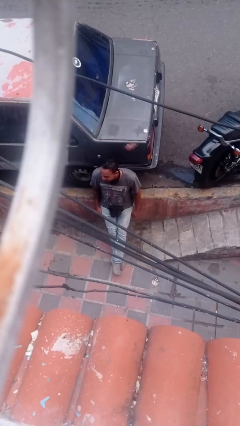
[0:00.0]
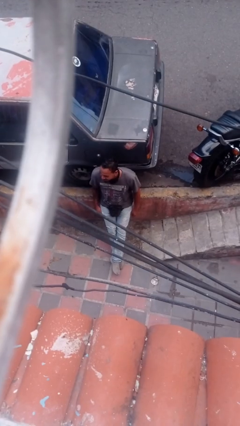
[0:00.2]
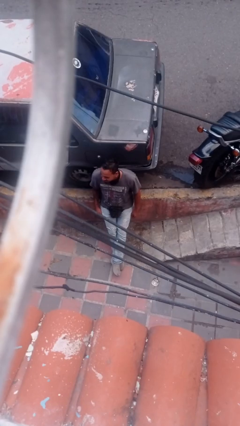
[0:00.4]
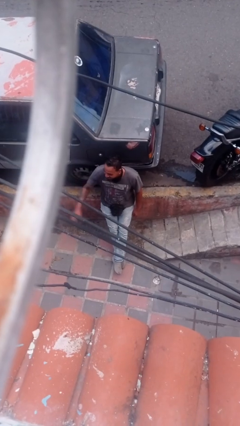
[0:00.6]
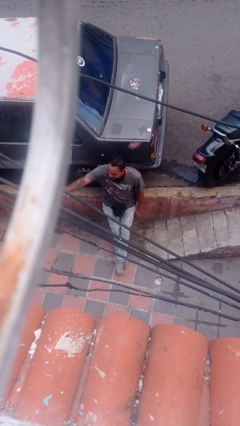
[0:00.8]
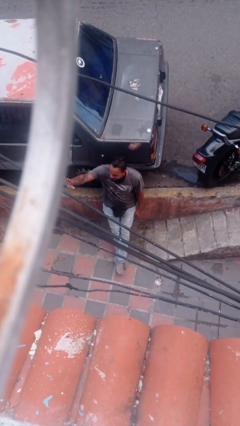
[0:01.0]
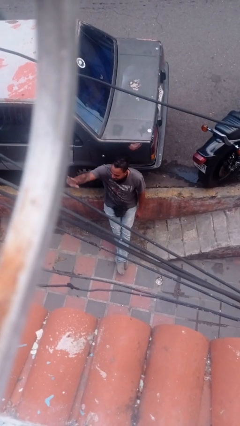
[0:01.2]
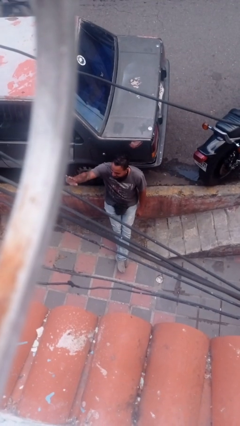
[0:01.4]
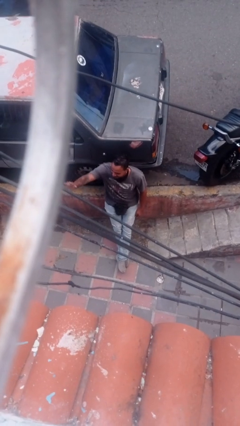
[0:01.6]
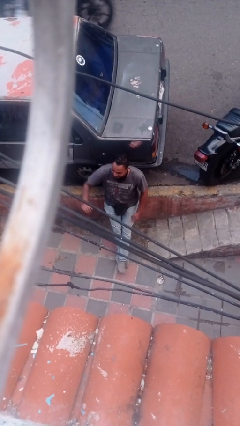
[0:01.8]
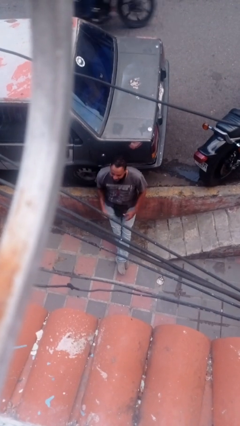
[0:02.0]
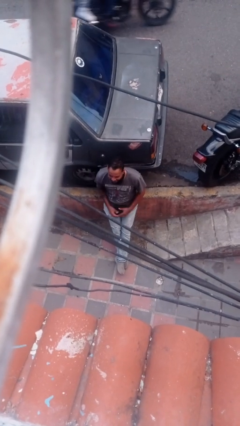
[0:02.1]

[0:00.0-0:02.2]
person waves at person

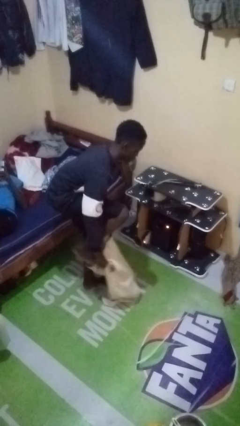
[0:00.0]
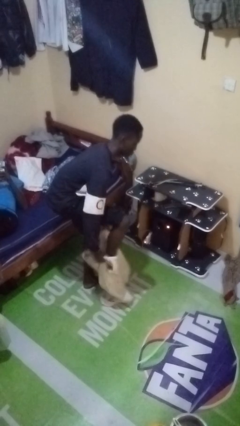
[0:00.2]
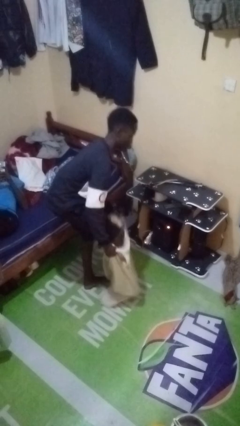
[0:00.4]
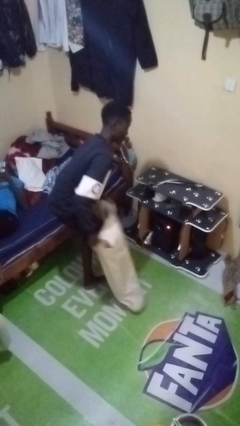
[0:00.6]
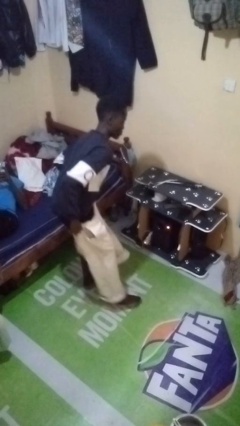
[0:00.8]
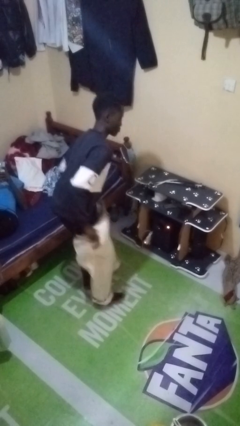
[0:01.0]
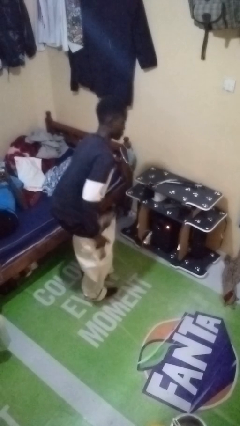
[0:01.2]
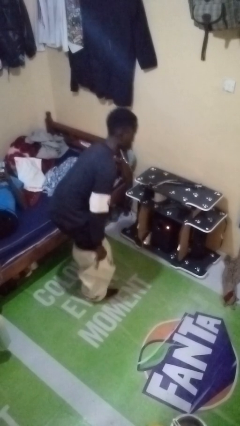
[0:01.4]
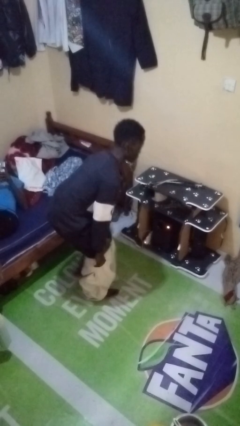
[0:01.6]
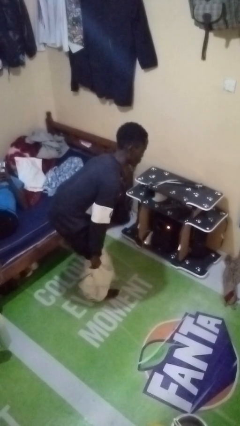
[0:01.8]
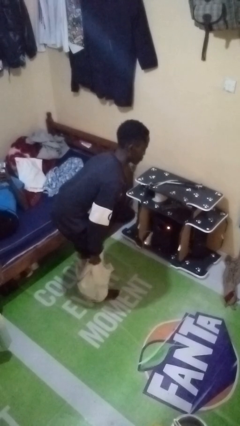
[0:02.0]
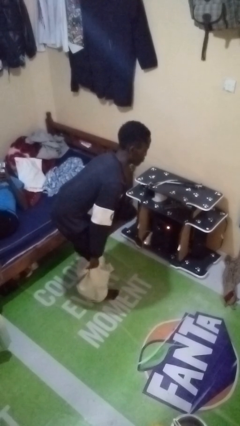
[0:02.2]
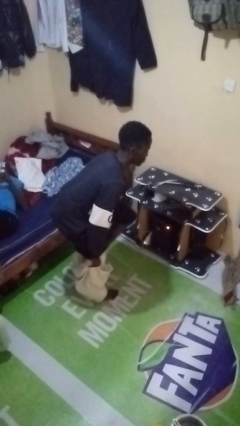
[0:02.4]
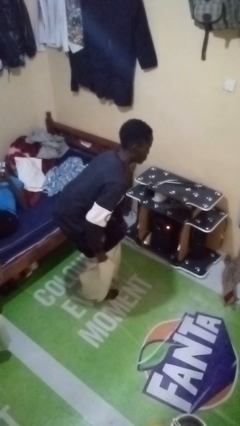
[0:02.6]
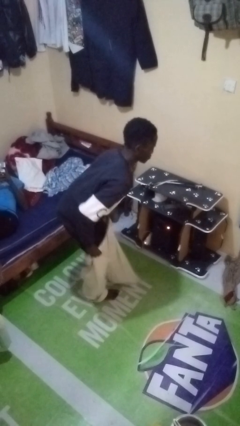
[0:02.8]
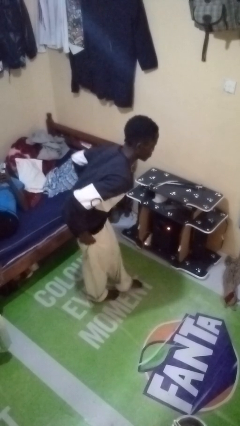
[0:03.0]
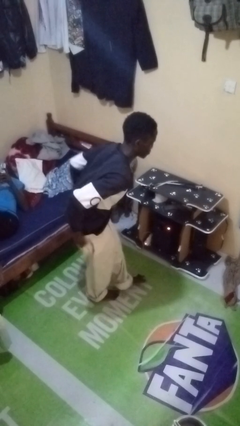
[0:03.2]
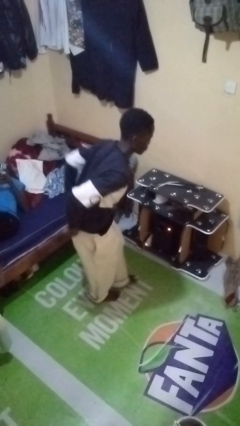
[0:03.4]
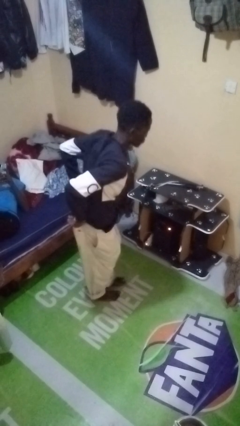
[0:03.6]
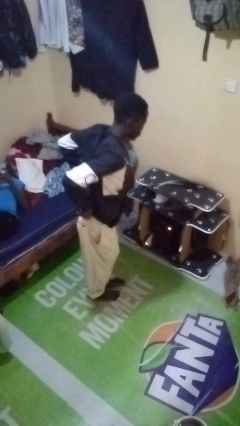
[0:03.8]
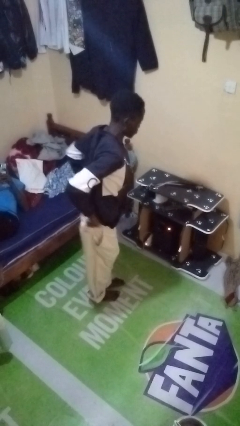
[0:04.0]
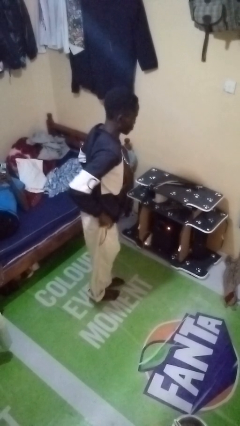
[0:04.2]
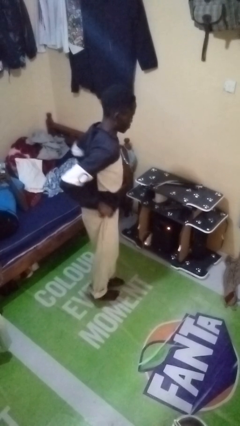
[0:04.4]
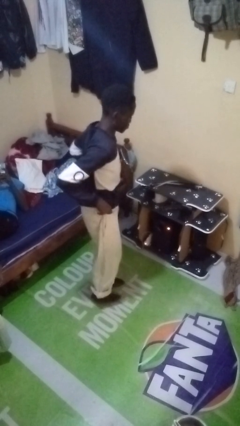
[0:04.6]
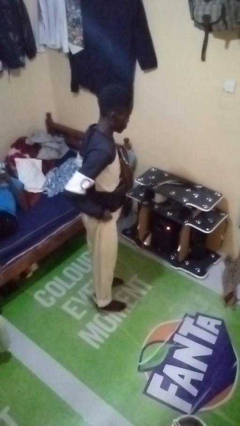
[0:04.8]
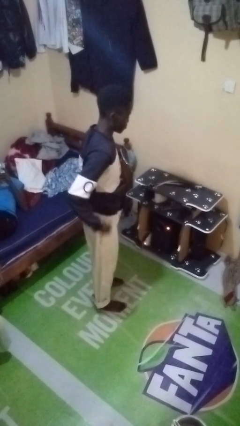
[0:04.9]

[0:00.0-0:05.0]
person puts on pants

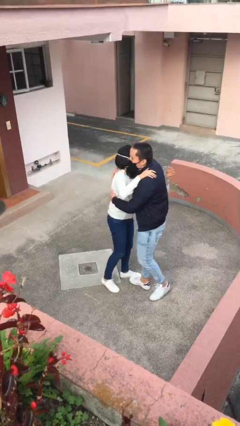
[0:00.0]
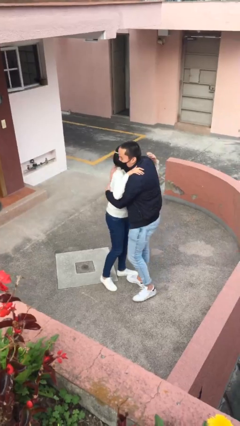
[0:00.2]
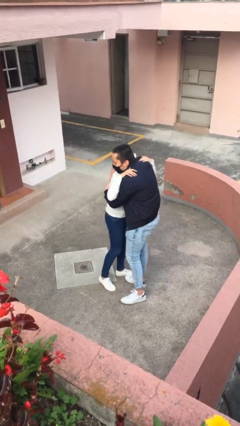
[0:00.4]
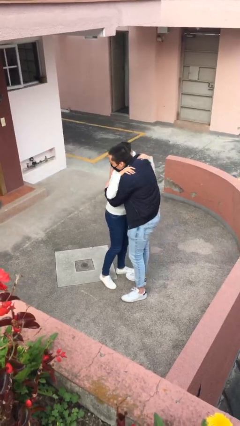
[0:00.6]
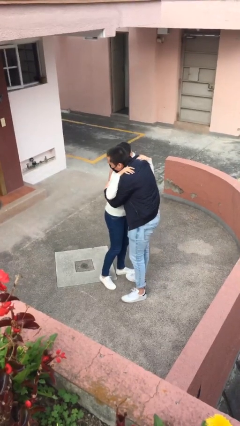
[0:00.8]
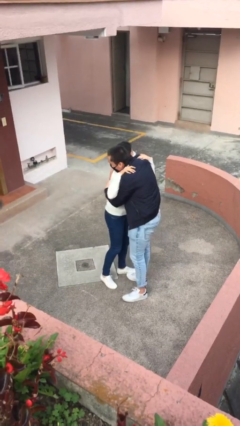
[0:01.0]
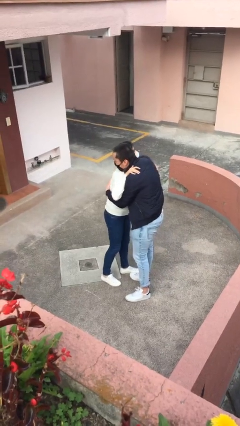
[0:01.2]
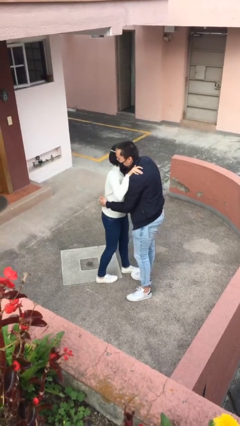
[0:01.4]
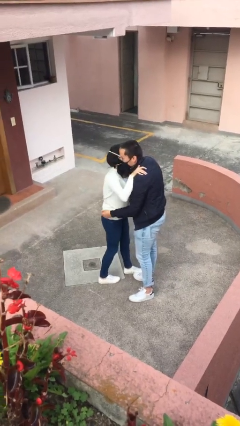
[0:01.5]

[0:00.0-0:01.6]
person embraces person

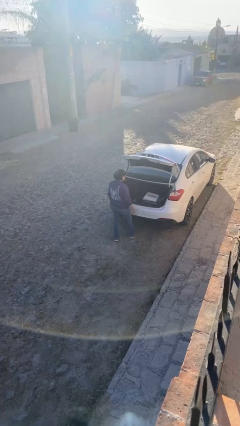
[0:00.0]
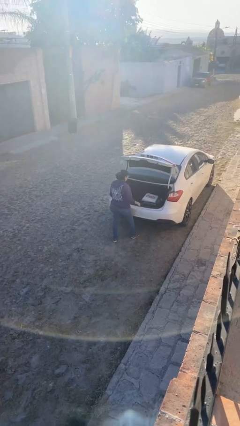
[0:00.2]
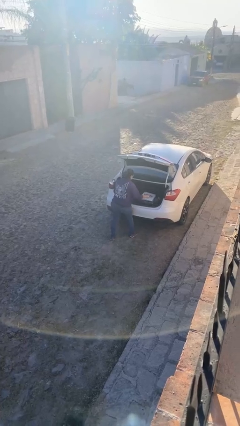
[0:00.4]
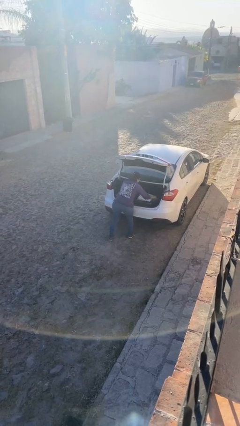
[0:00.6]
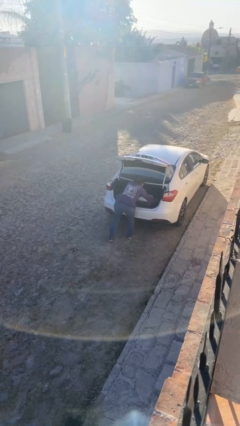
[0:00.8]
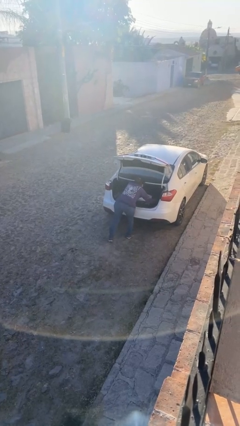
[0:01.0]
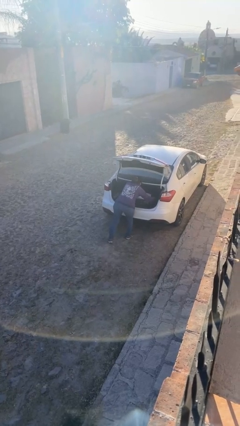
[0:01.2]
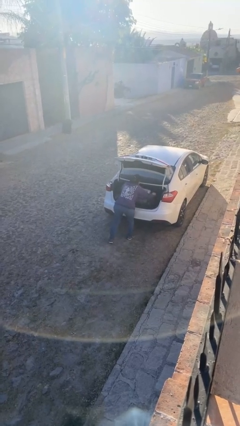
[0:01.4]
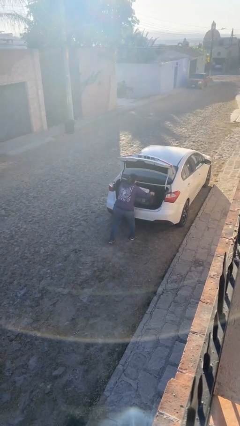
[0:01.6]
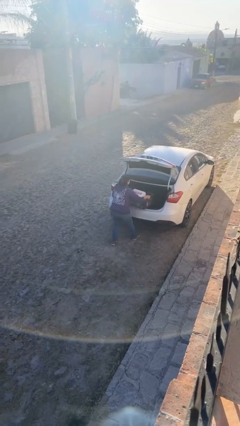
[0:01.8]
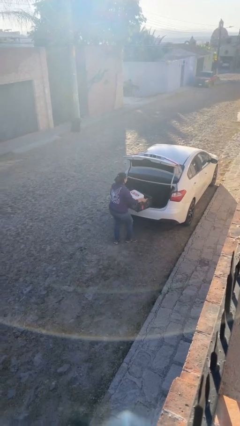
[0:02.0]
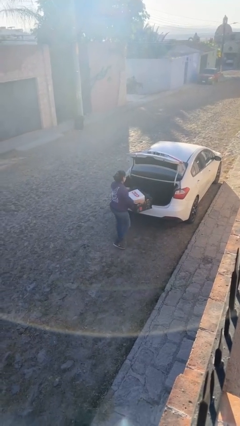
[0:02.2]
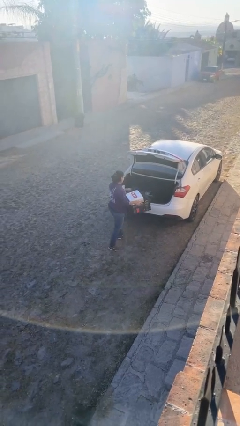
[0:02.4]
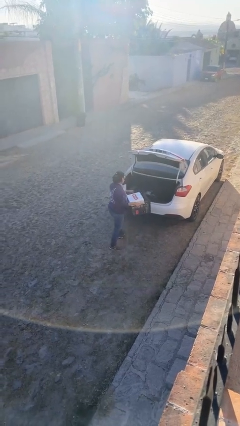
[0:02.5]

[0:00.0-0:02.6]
person unloads car

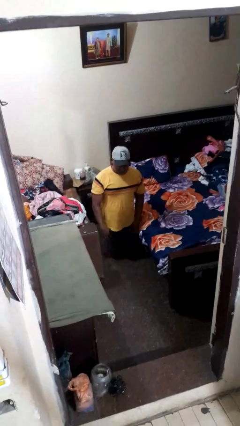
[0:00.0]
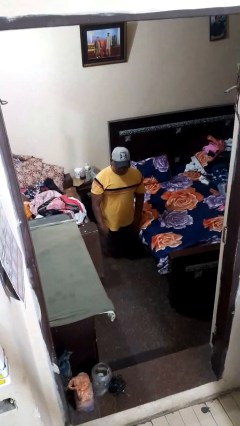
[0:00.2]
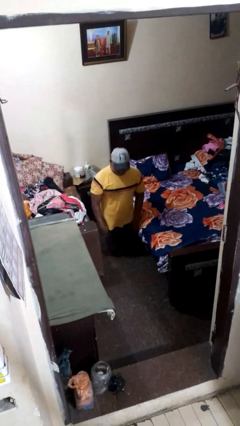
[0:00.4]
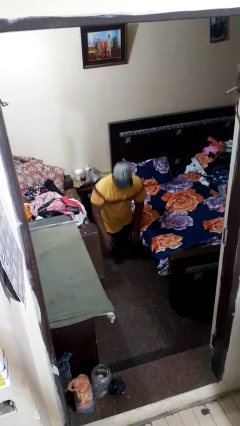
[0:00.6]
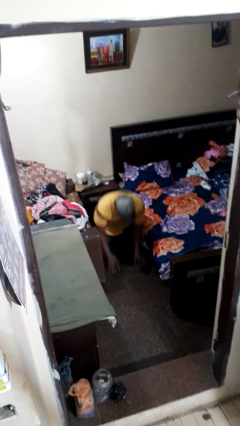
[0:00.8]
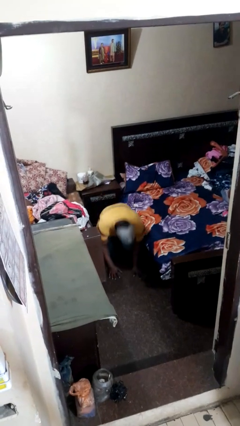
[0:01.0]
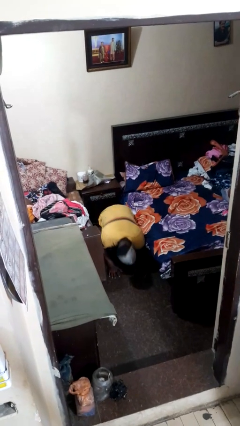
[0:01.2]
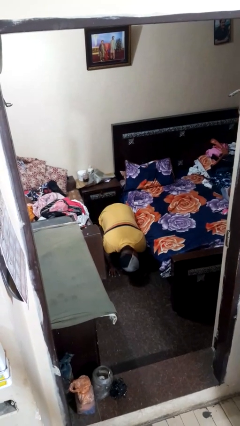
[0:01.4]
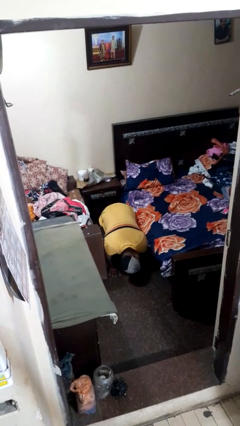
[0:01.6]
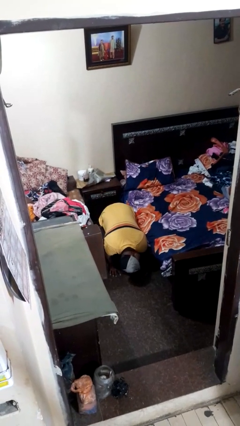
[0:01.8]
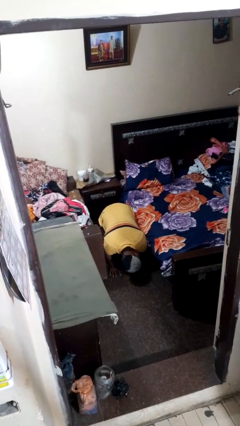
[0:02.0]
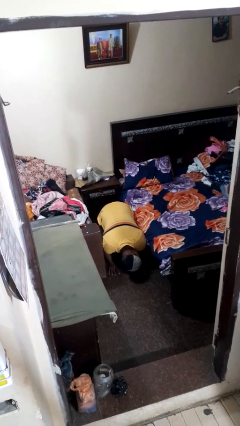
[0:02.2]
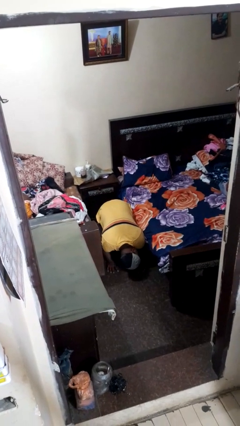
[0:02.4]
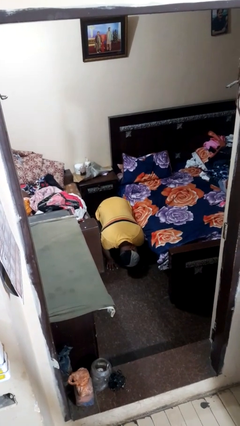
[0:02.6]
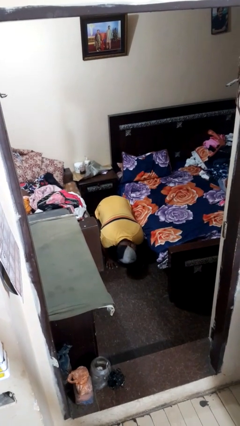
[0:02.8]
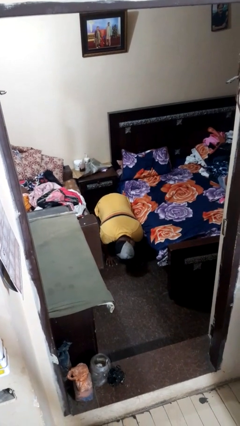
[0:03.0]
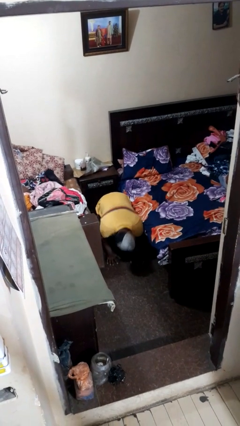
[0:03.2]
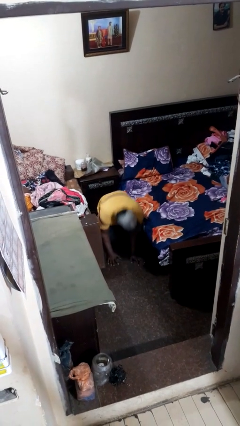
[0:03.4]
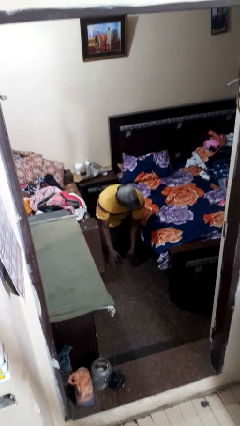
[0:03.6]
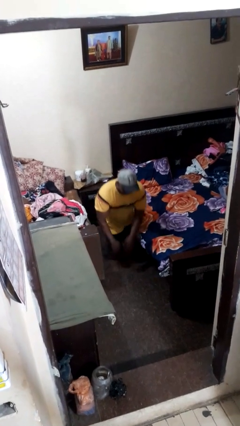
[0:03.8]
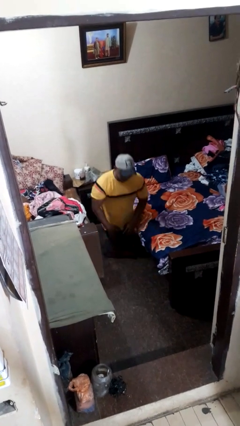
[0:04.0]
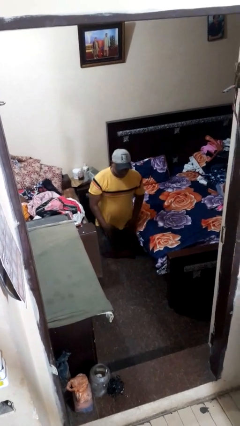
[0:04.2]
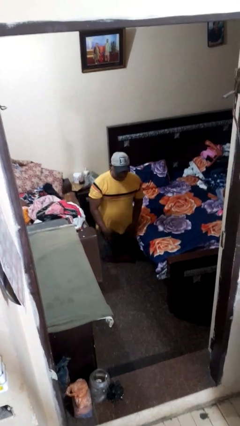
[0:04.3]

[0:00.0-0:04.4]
person searches under bed

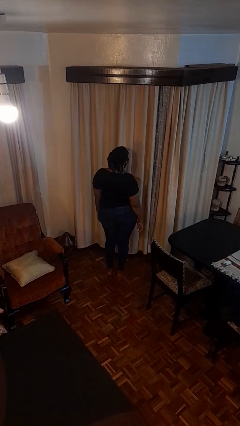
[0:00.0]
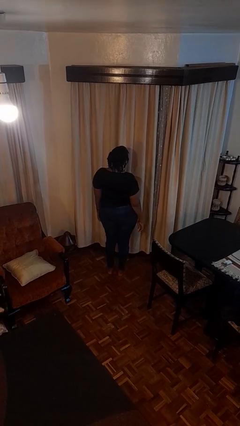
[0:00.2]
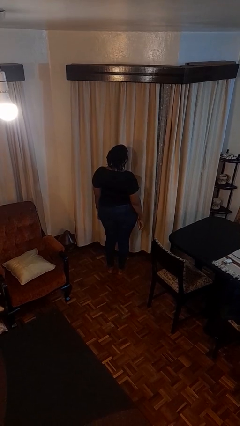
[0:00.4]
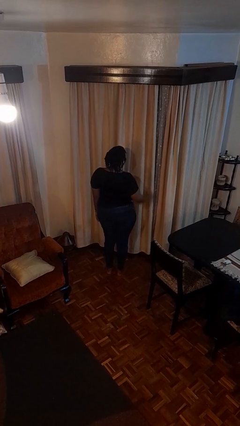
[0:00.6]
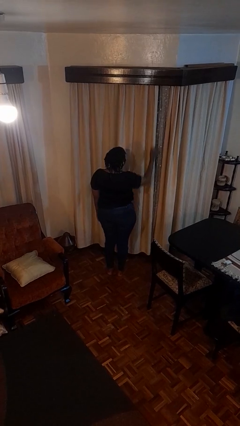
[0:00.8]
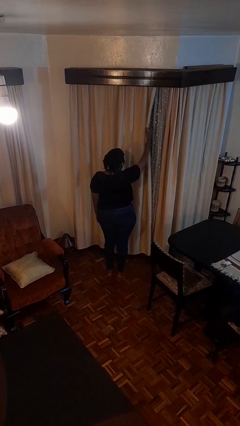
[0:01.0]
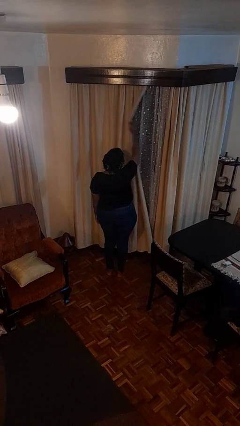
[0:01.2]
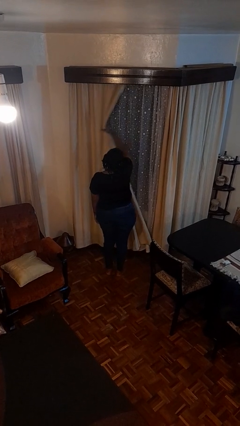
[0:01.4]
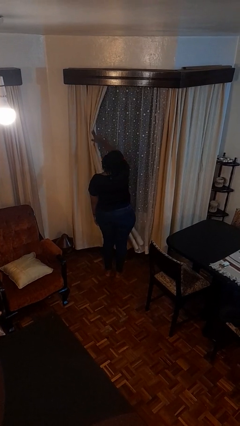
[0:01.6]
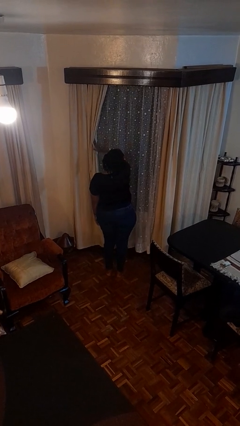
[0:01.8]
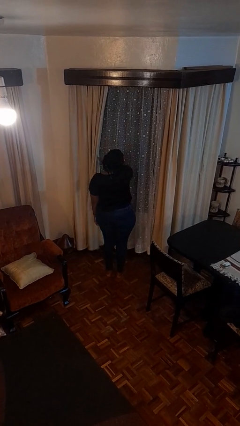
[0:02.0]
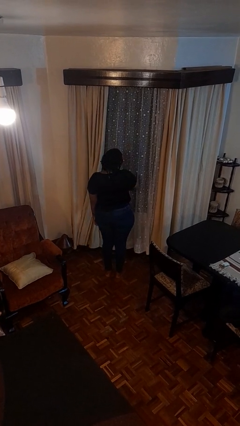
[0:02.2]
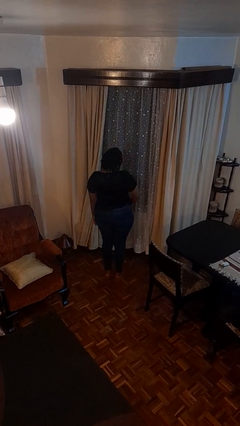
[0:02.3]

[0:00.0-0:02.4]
person opens curtains
